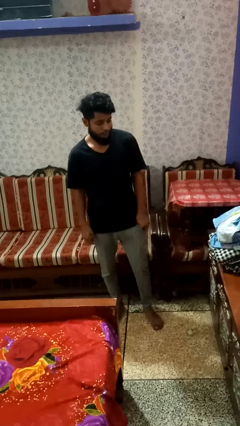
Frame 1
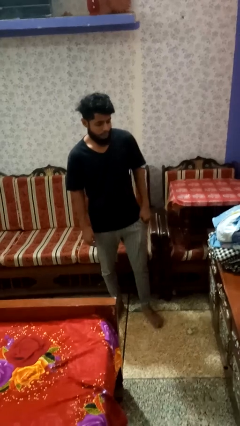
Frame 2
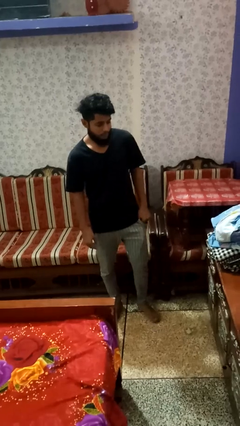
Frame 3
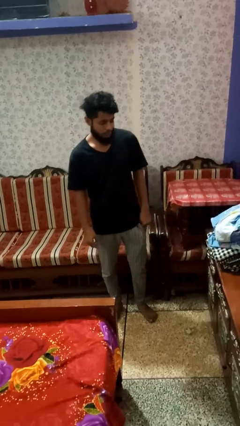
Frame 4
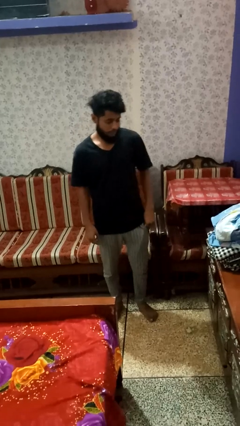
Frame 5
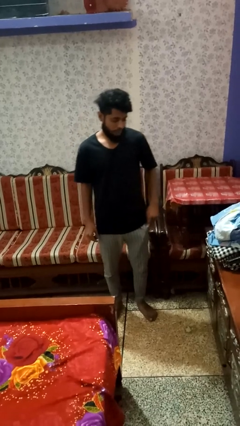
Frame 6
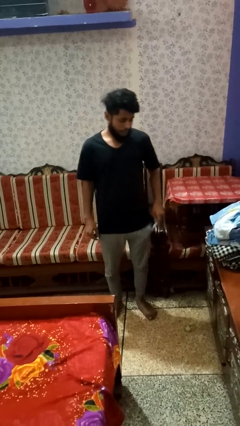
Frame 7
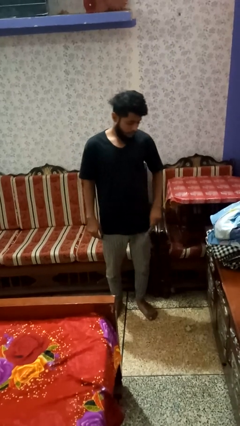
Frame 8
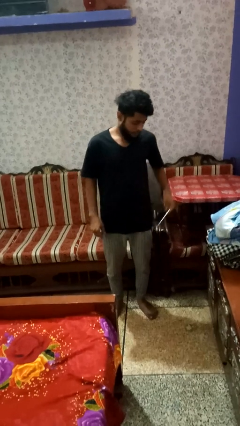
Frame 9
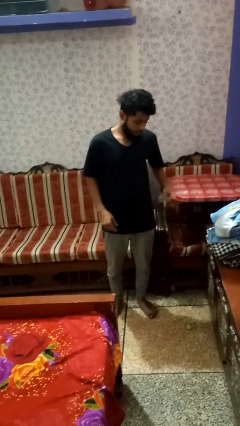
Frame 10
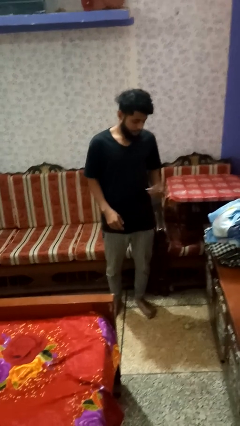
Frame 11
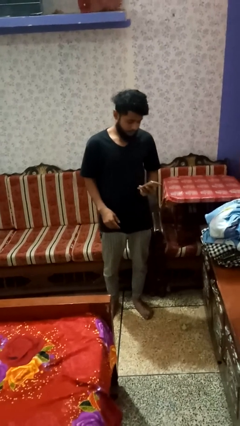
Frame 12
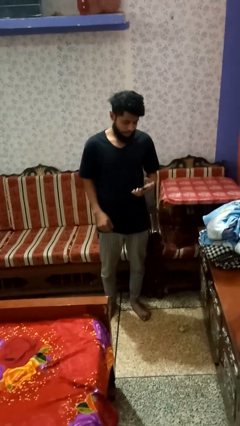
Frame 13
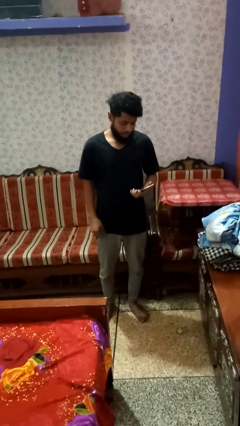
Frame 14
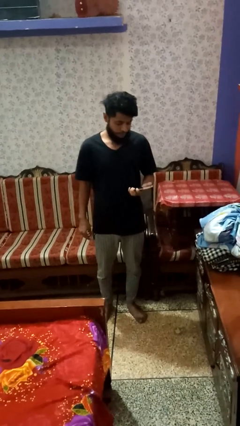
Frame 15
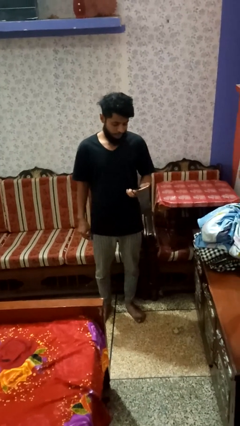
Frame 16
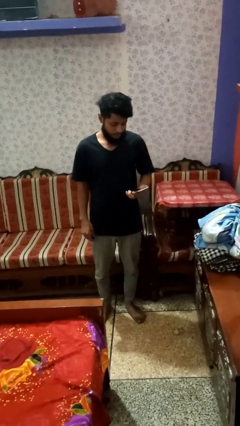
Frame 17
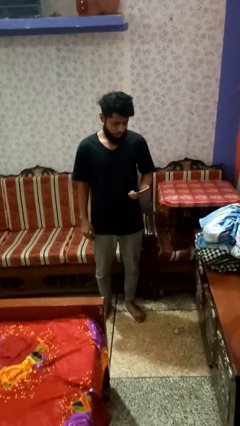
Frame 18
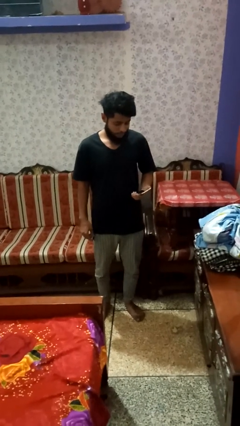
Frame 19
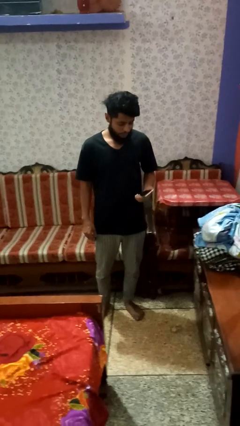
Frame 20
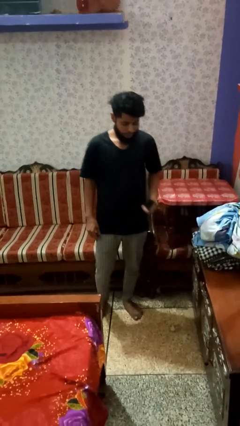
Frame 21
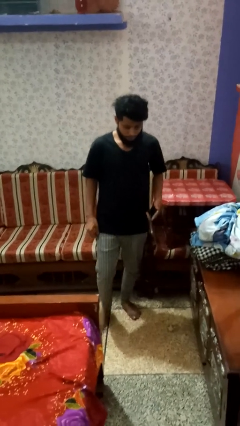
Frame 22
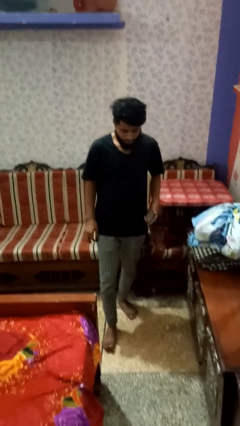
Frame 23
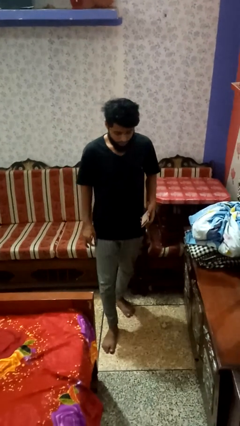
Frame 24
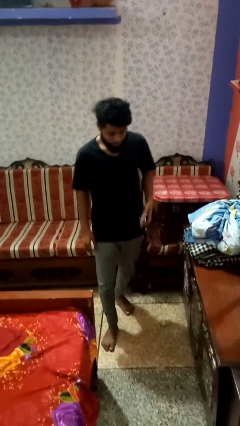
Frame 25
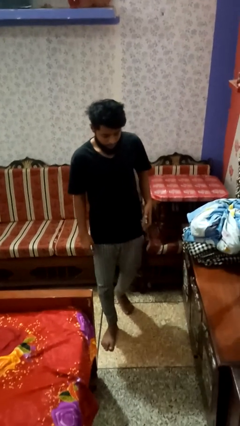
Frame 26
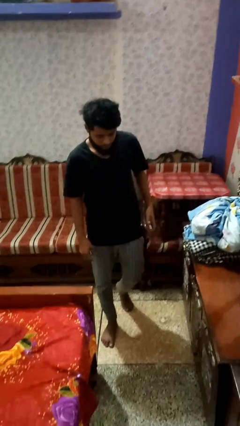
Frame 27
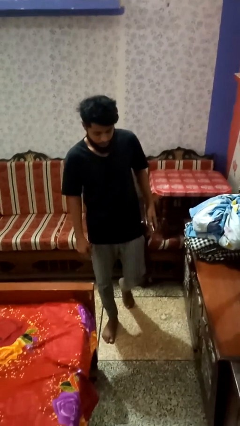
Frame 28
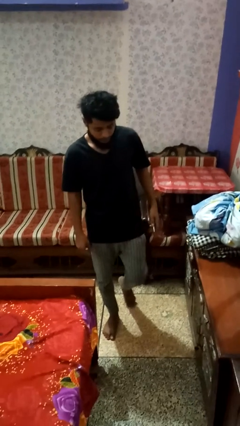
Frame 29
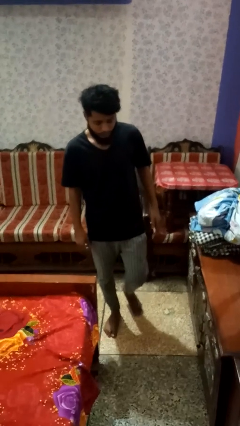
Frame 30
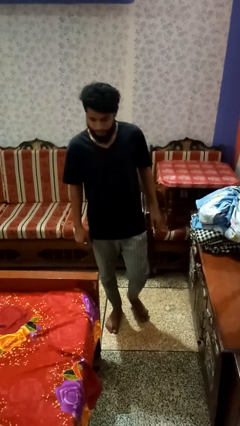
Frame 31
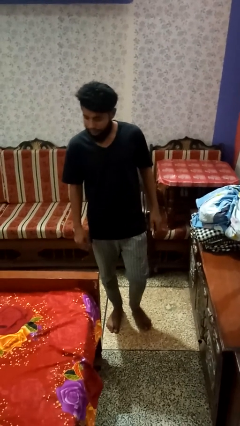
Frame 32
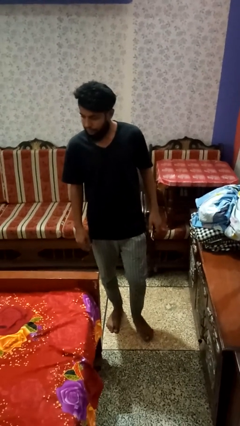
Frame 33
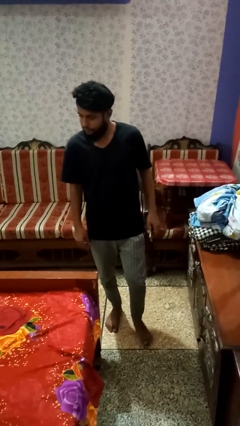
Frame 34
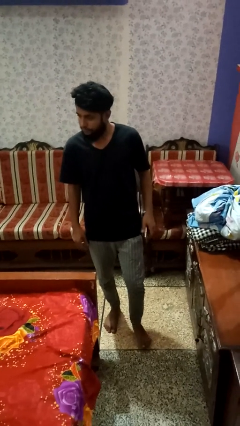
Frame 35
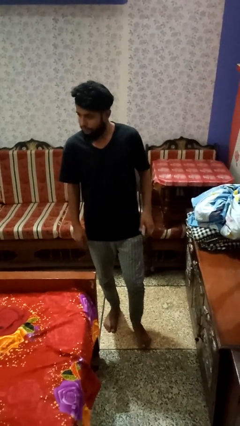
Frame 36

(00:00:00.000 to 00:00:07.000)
person takes phone from pocket

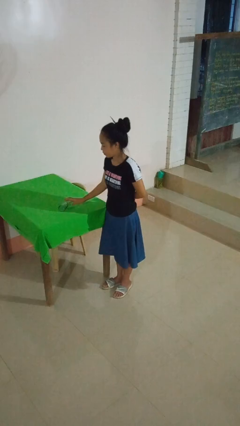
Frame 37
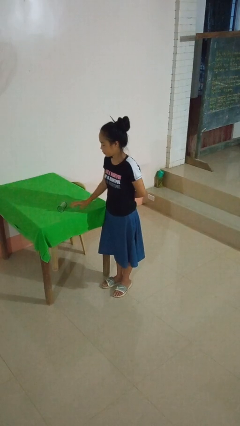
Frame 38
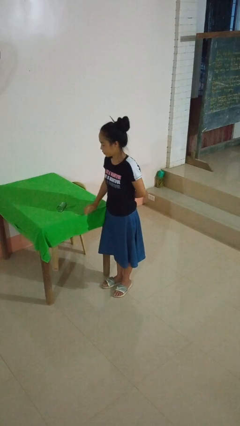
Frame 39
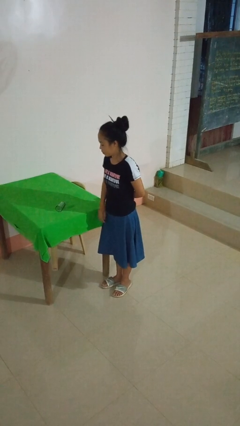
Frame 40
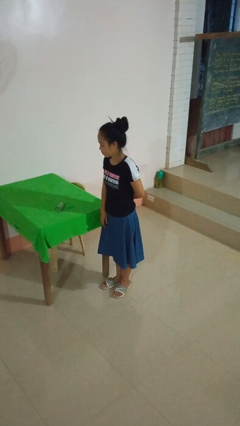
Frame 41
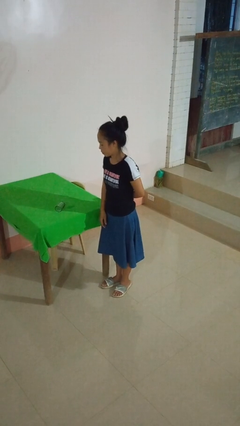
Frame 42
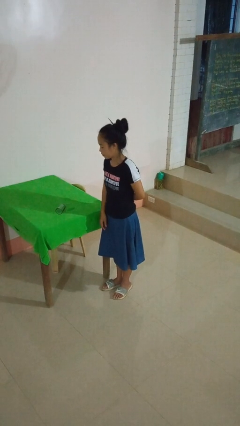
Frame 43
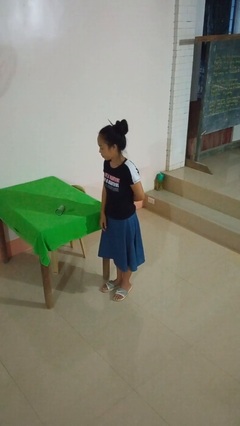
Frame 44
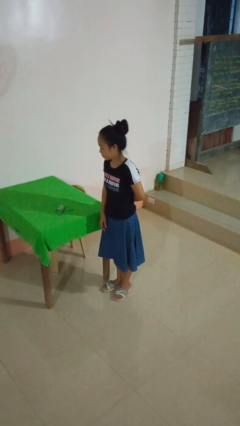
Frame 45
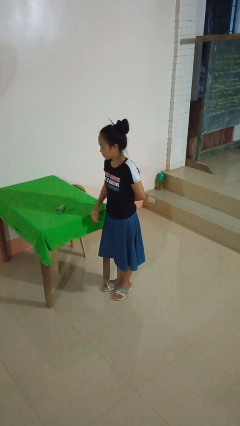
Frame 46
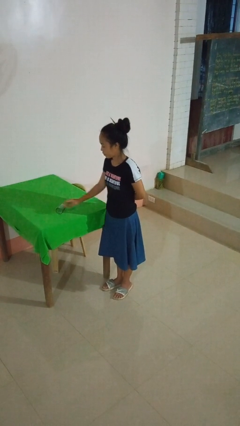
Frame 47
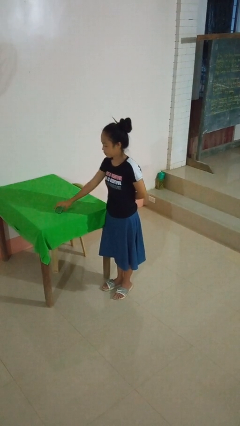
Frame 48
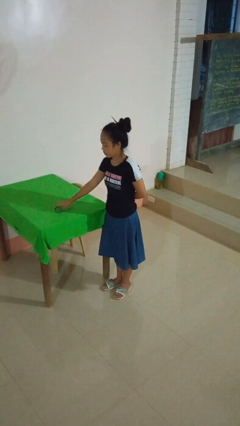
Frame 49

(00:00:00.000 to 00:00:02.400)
person knocks over glass

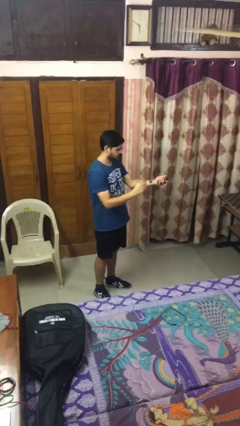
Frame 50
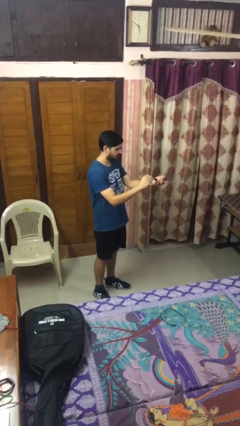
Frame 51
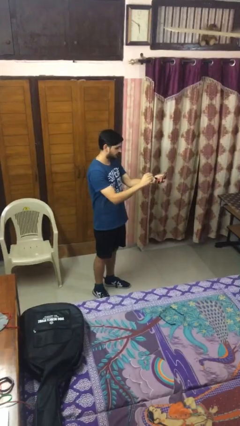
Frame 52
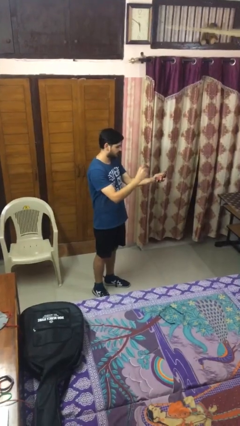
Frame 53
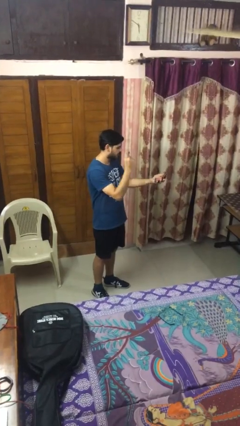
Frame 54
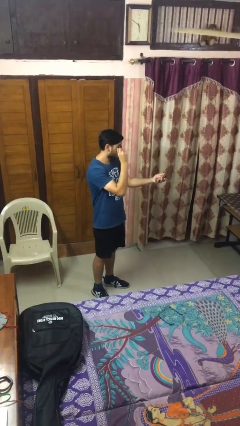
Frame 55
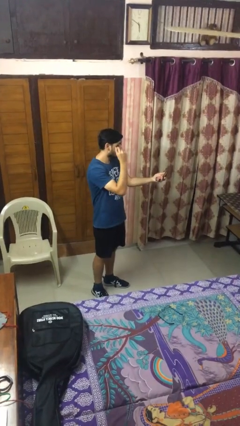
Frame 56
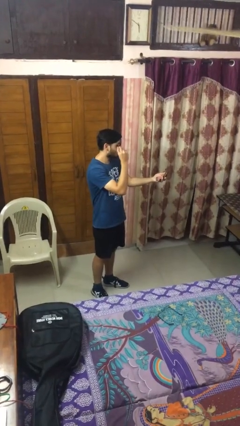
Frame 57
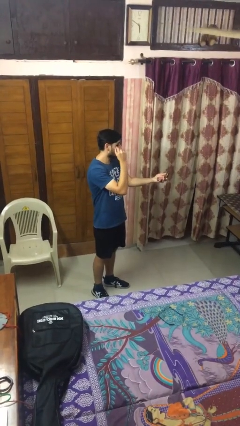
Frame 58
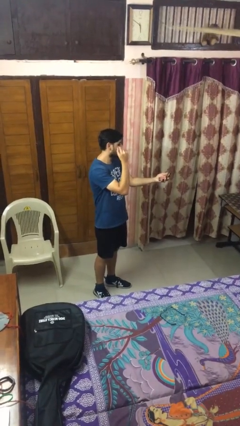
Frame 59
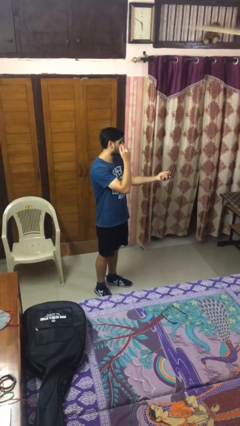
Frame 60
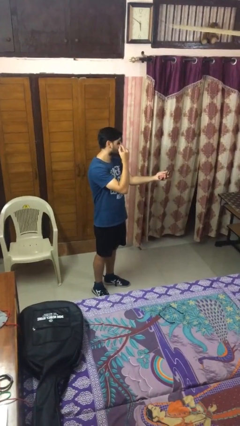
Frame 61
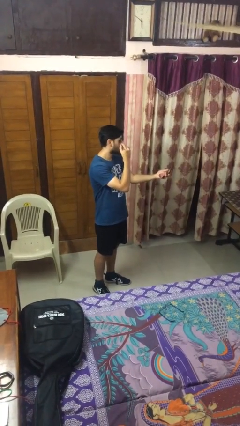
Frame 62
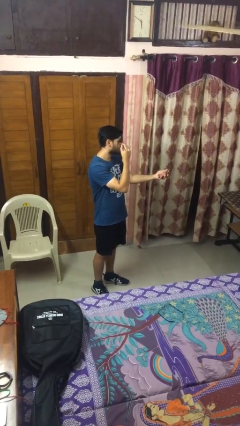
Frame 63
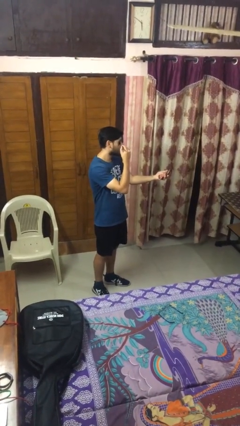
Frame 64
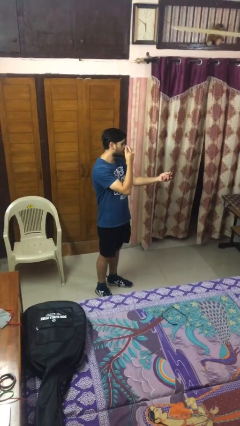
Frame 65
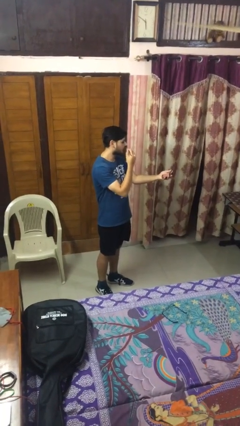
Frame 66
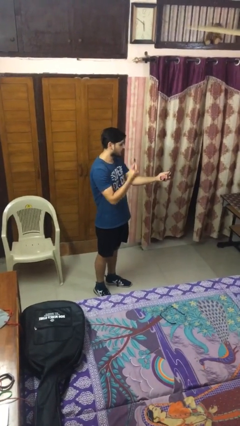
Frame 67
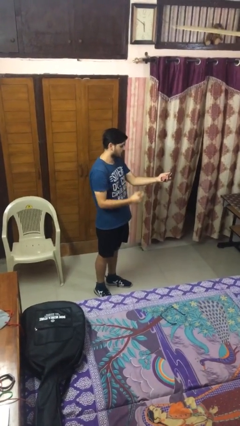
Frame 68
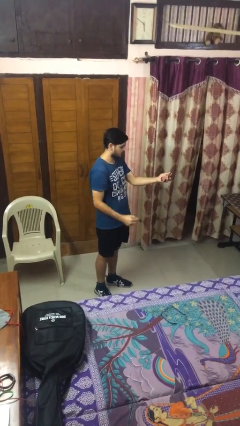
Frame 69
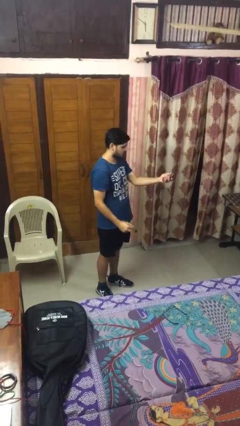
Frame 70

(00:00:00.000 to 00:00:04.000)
person applies eye makeup

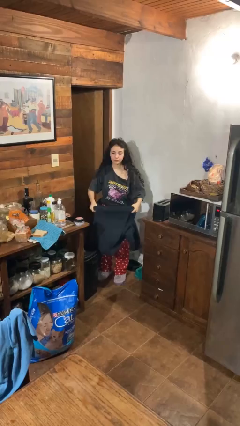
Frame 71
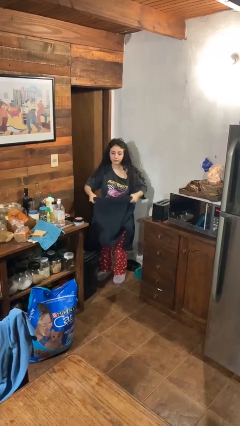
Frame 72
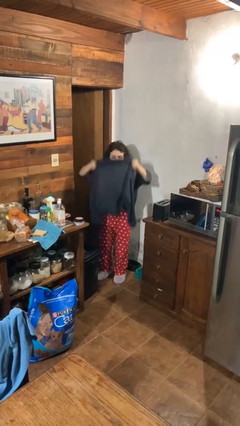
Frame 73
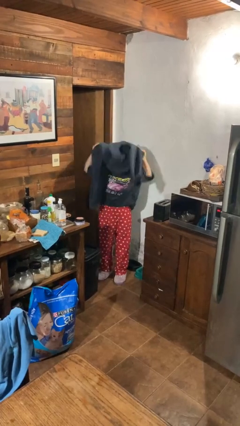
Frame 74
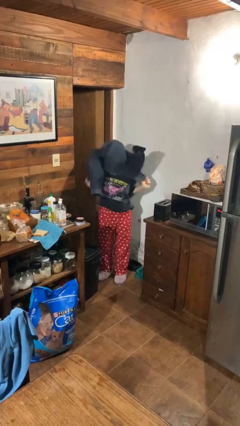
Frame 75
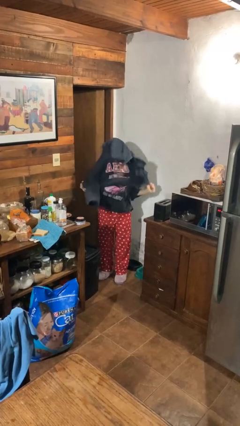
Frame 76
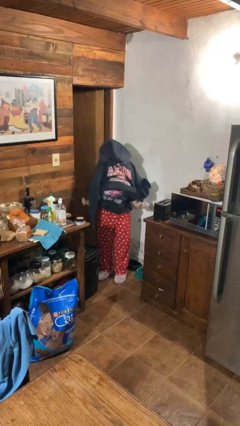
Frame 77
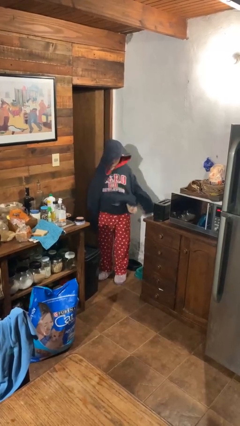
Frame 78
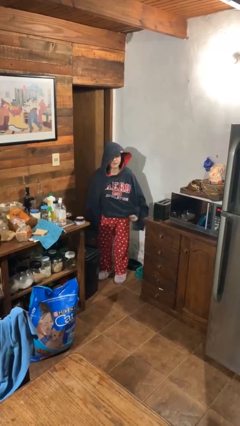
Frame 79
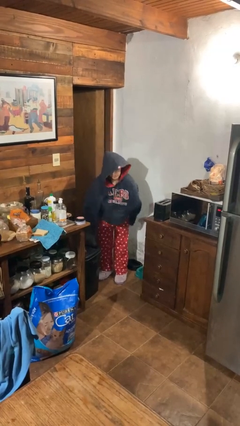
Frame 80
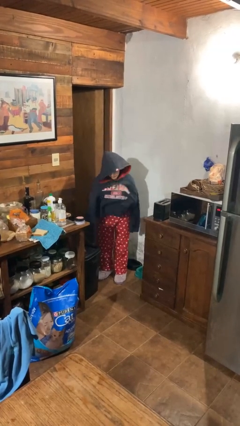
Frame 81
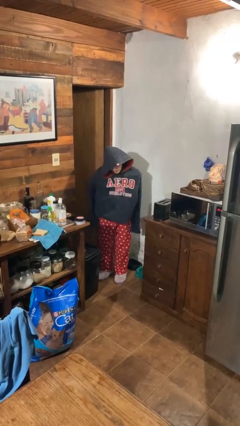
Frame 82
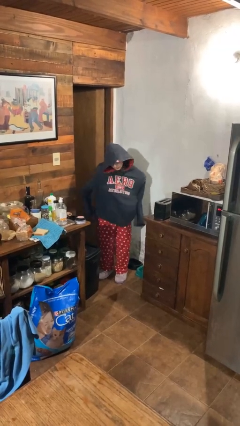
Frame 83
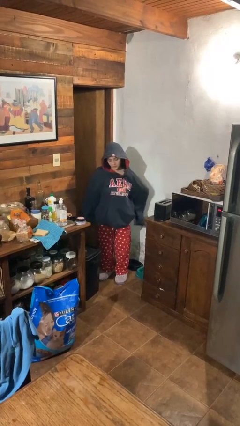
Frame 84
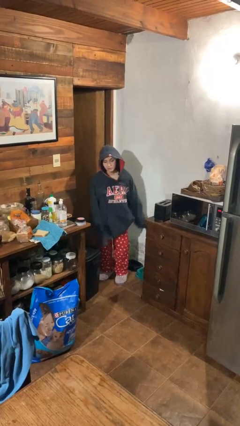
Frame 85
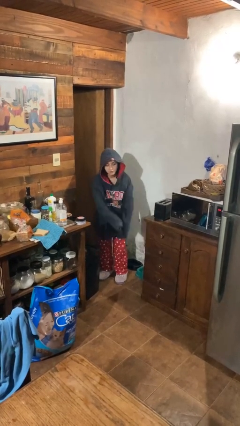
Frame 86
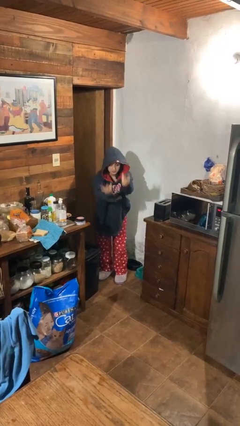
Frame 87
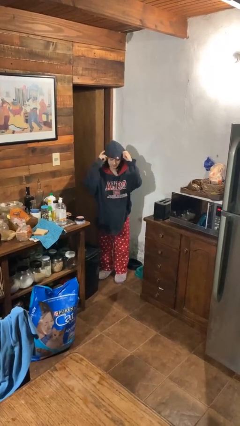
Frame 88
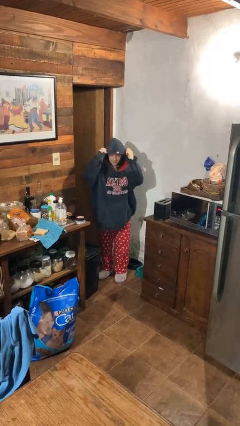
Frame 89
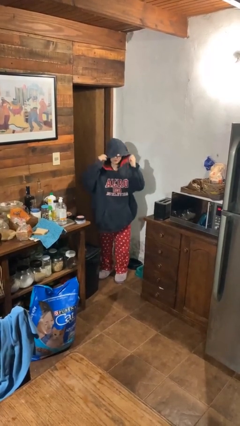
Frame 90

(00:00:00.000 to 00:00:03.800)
person puts on hoodie

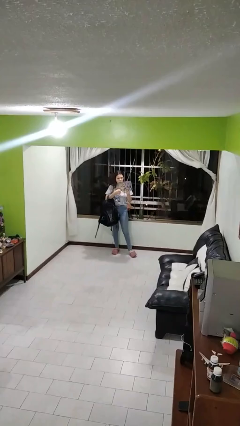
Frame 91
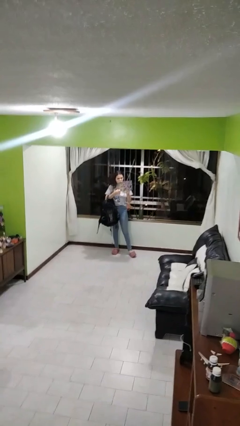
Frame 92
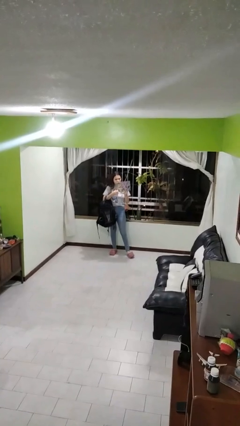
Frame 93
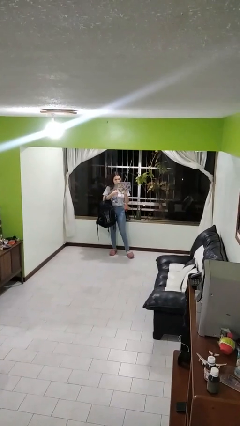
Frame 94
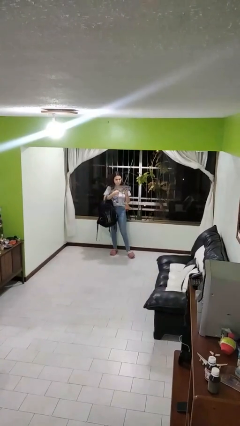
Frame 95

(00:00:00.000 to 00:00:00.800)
person takes object from backpack
